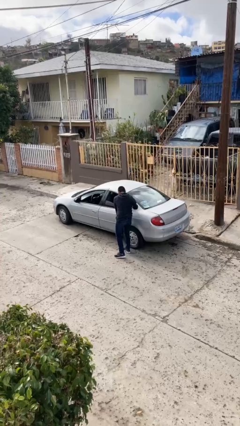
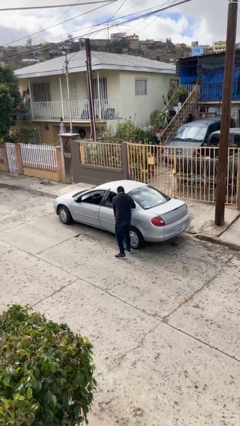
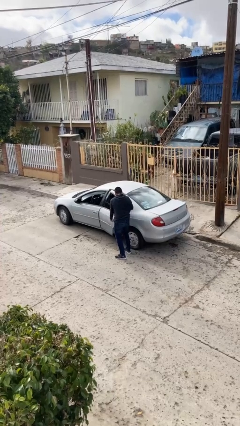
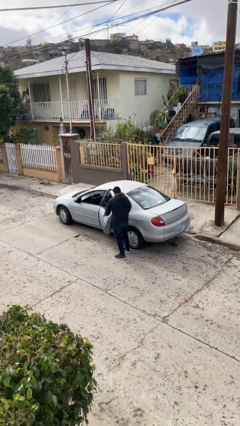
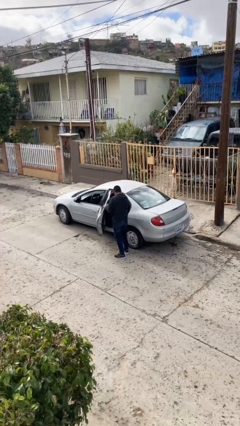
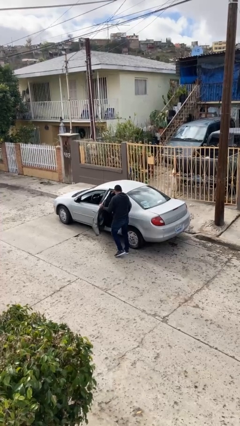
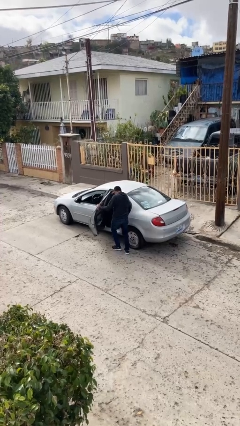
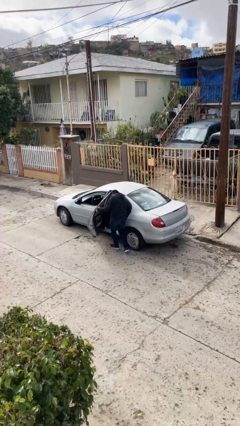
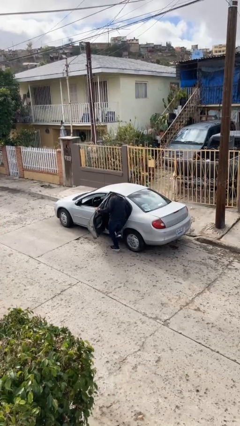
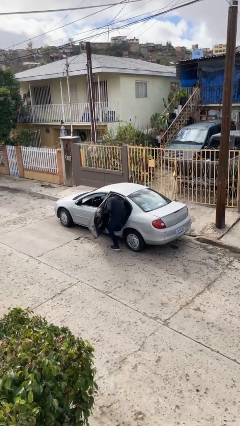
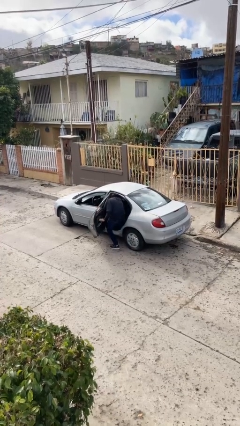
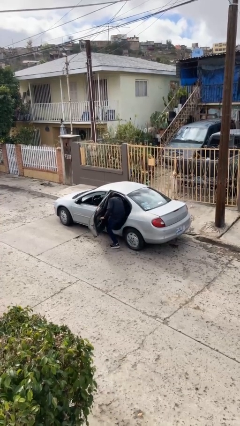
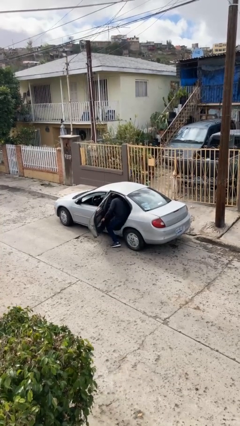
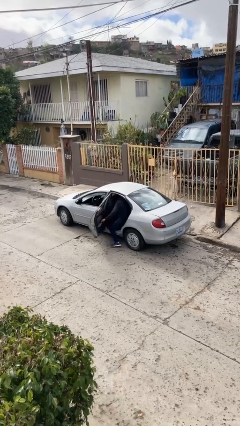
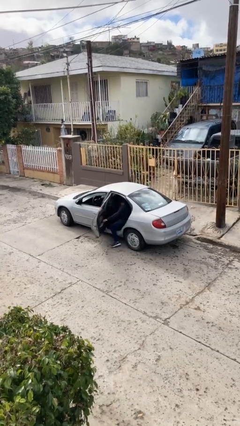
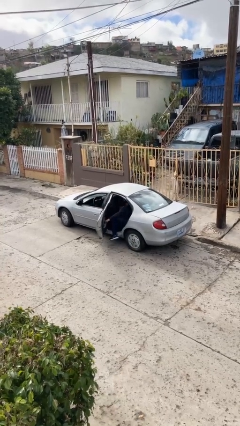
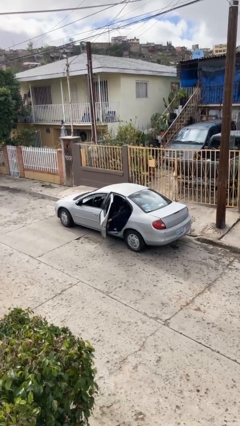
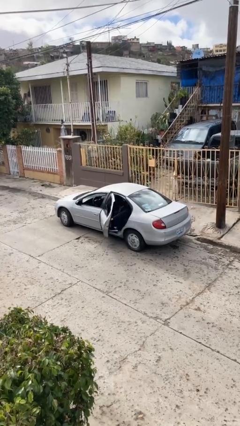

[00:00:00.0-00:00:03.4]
car picks up person

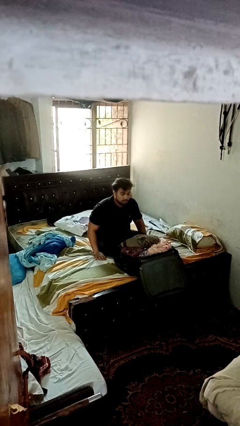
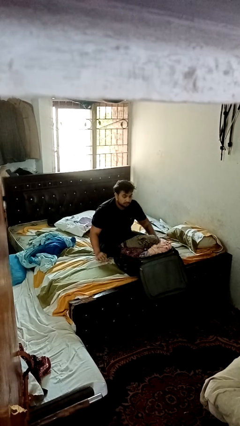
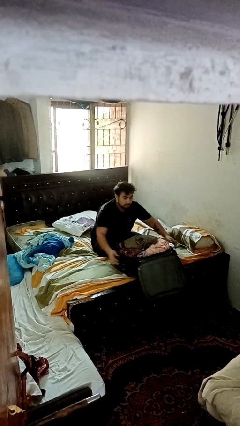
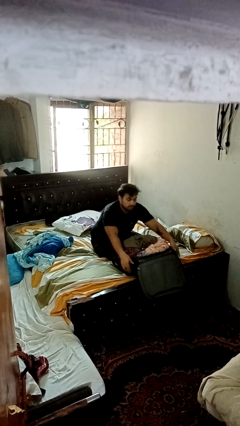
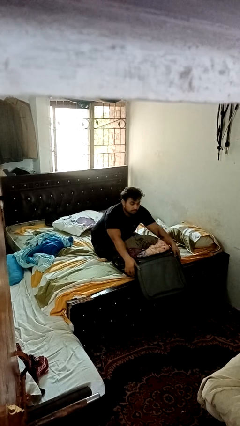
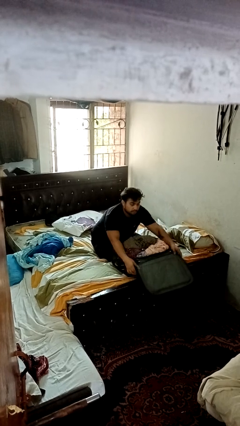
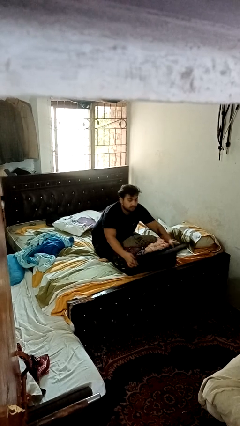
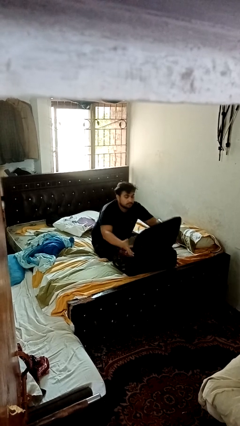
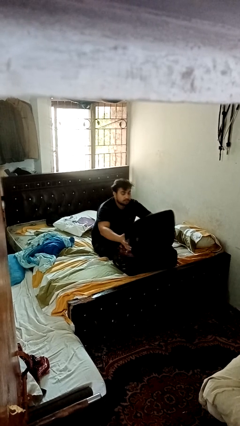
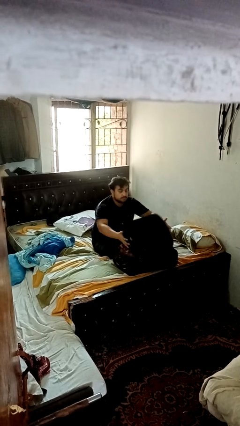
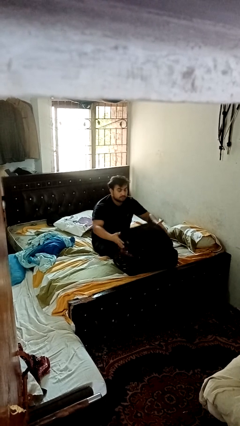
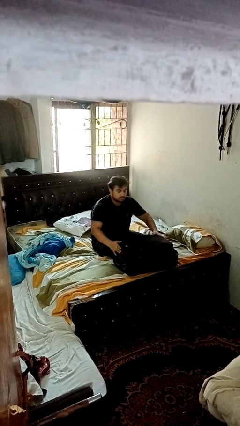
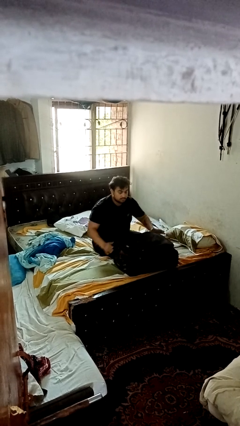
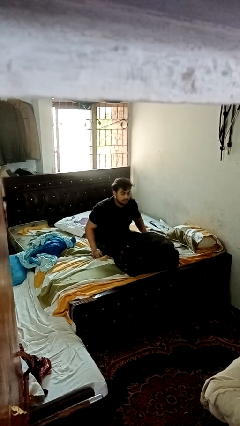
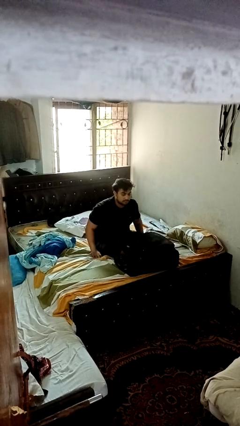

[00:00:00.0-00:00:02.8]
person closes suitcase

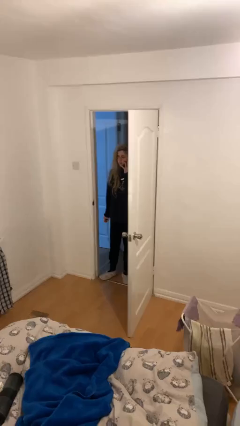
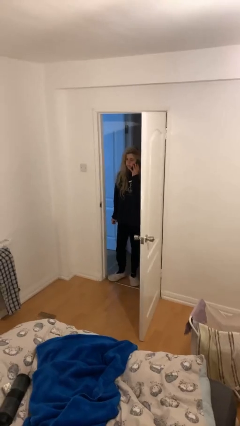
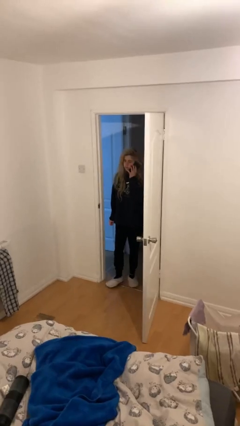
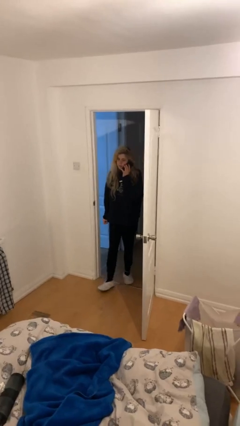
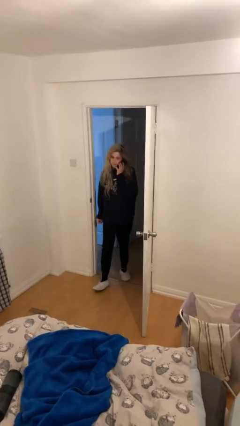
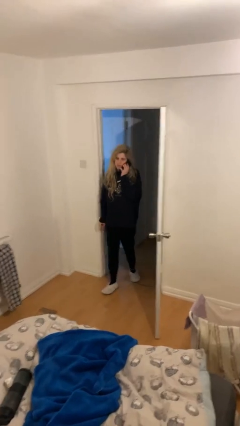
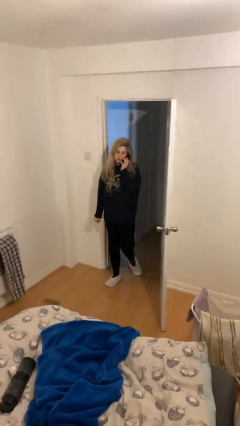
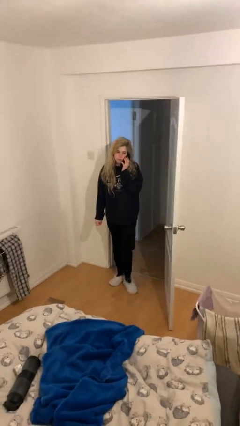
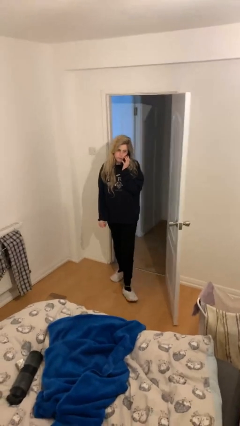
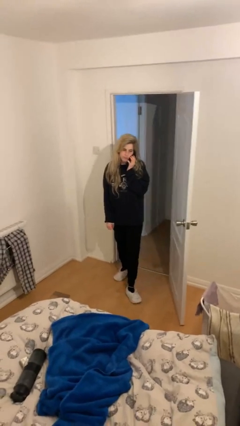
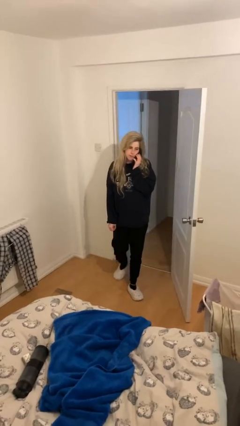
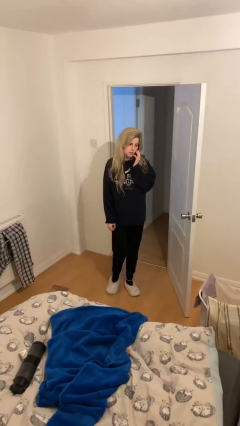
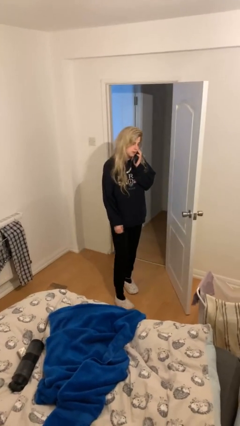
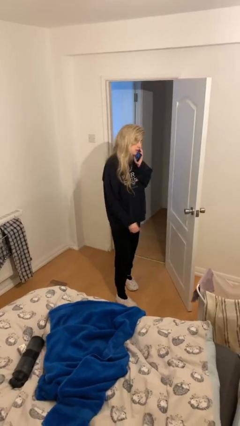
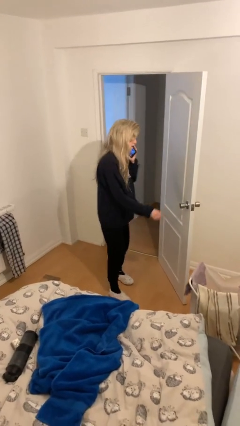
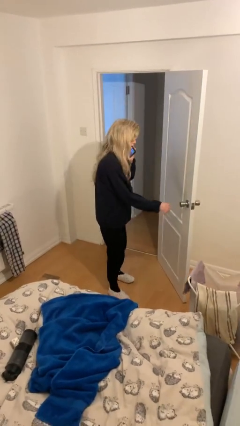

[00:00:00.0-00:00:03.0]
person enters scene through structure

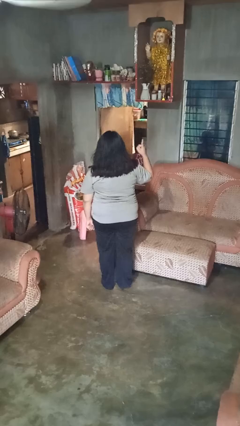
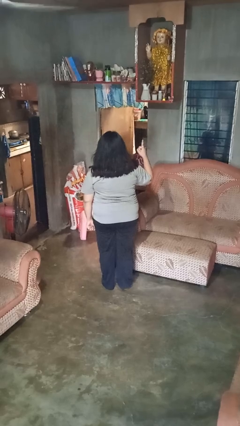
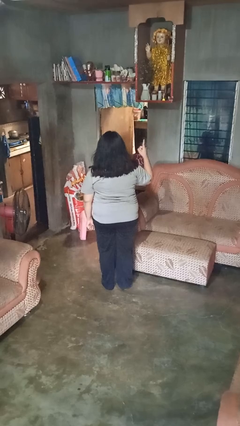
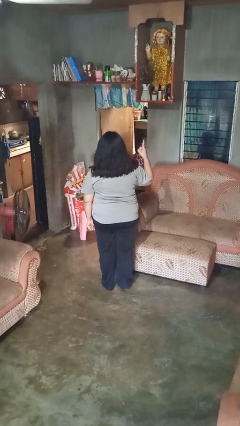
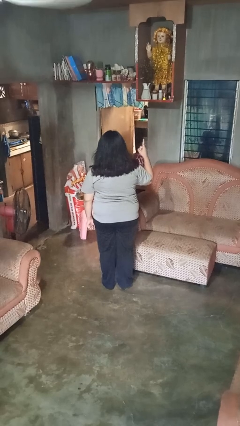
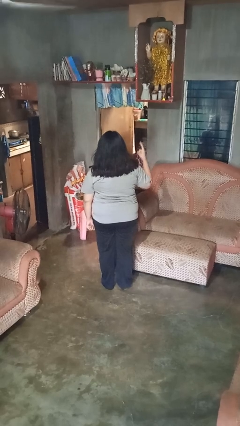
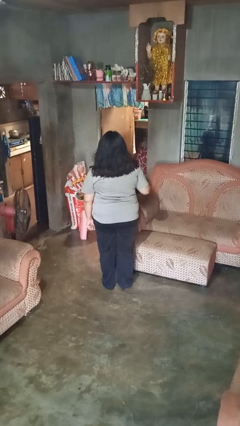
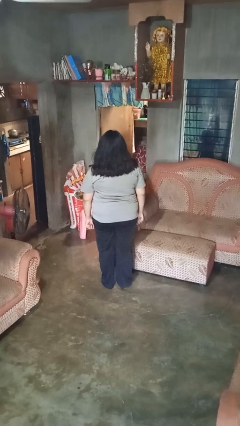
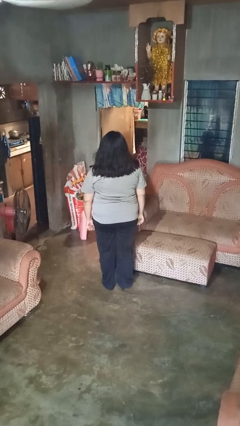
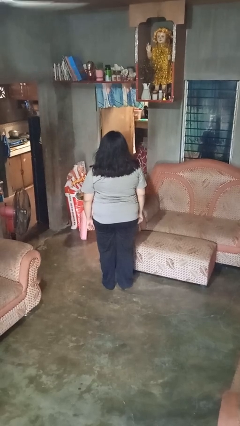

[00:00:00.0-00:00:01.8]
person gestures number one

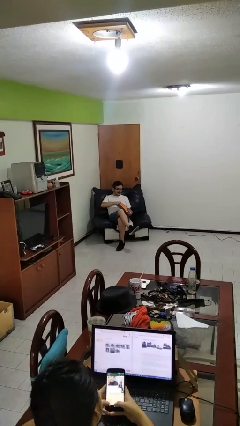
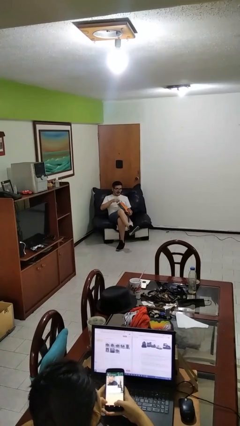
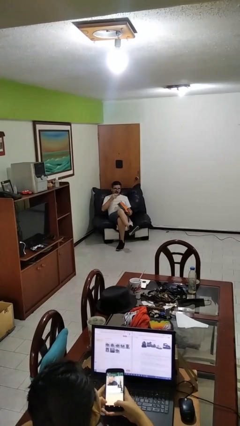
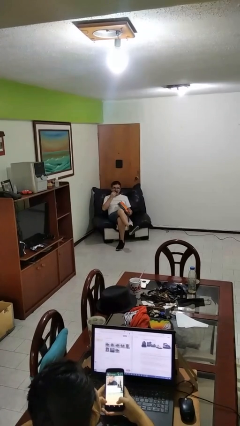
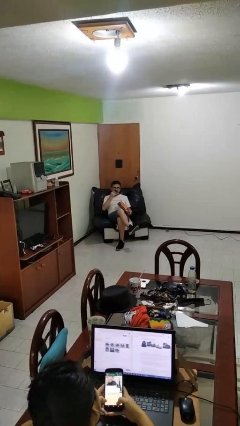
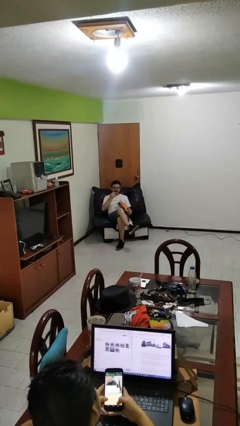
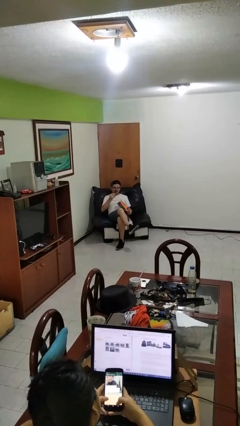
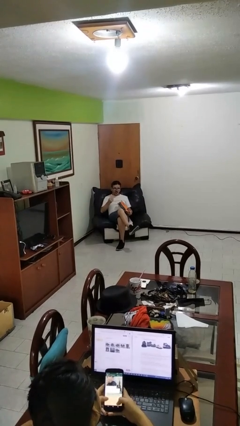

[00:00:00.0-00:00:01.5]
person eats snack from bag

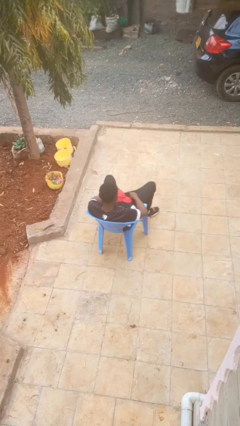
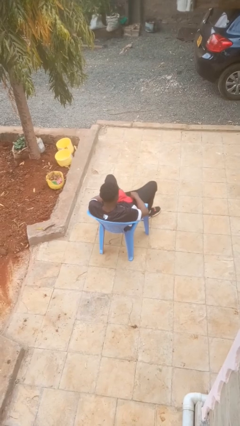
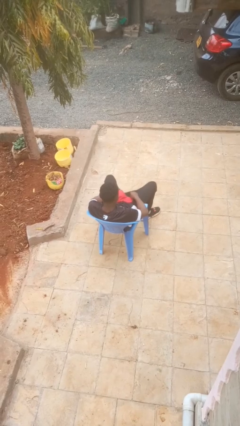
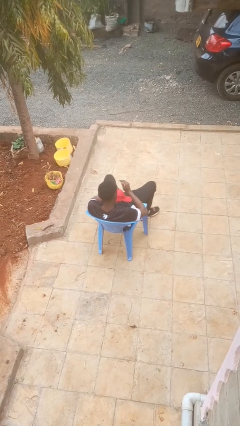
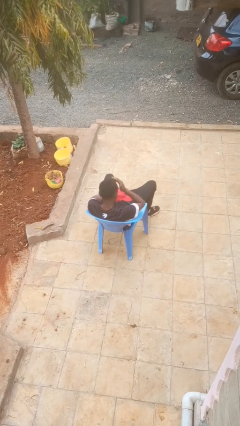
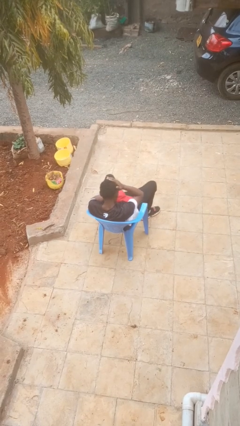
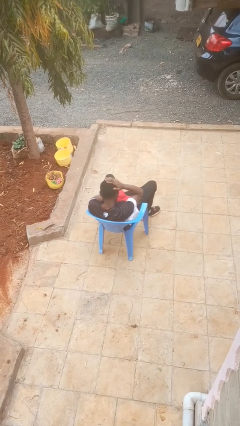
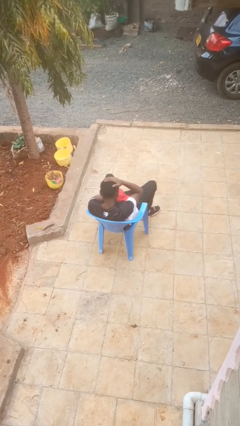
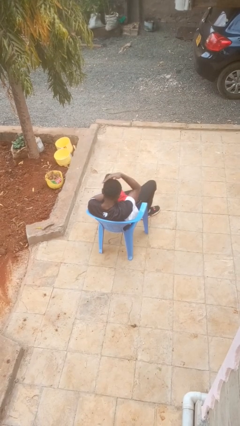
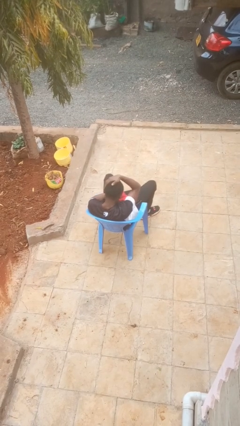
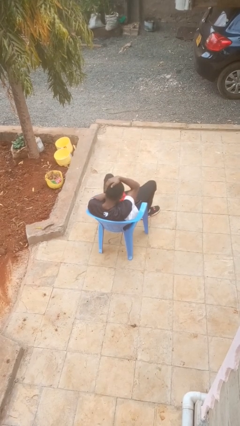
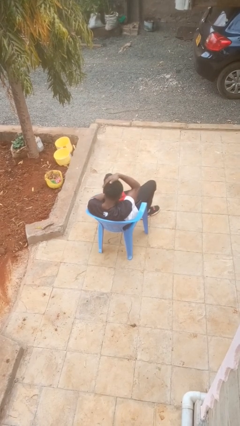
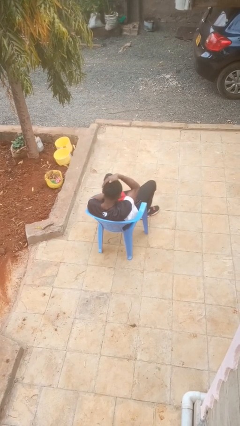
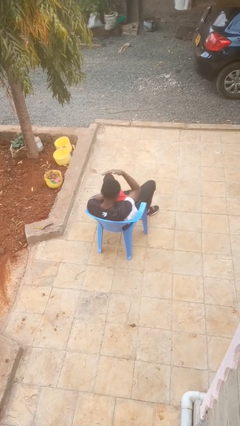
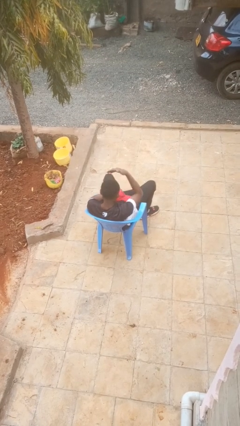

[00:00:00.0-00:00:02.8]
person strokes hair

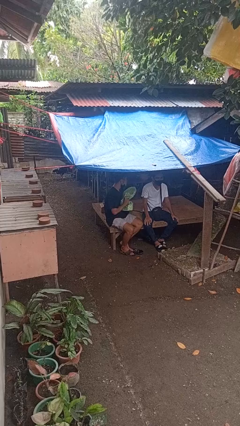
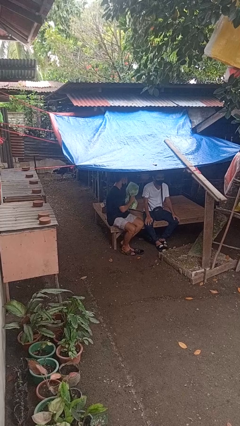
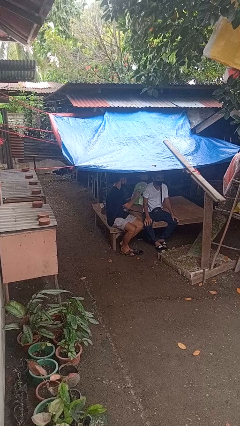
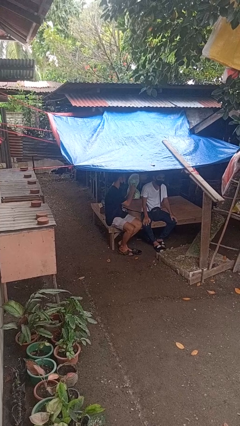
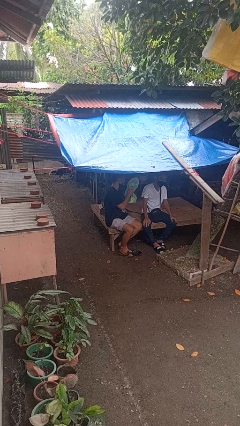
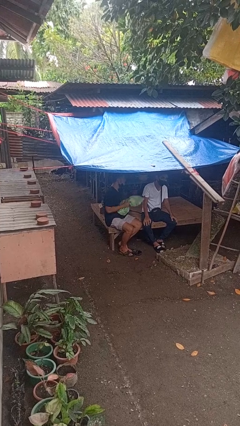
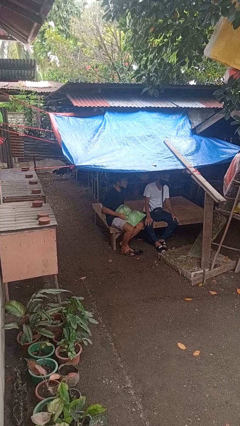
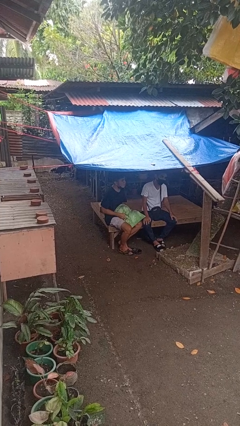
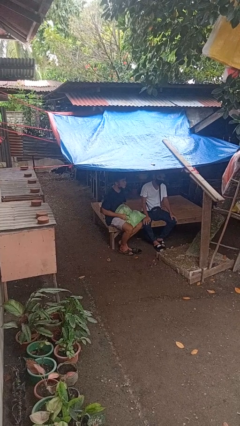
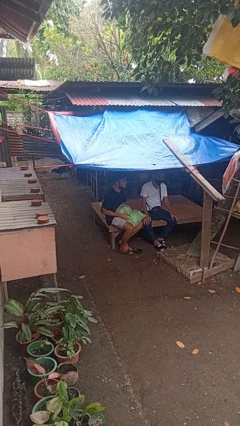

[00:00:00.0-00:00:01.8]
person hits person with pillow
